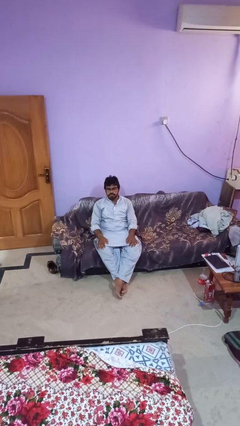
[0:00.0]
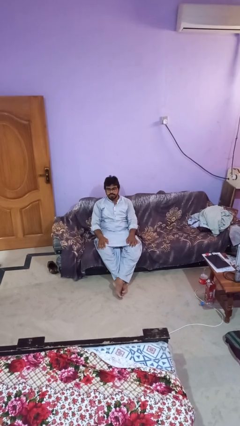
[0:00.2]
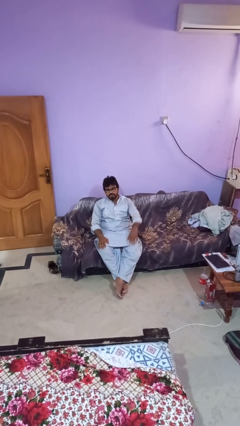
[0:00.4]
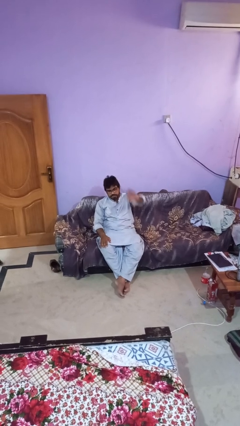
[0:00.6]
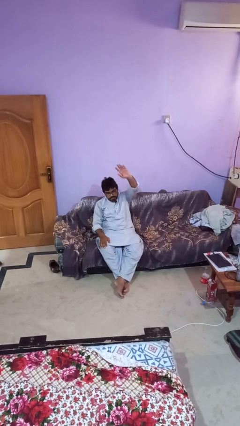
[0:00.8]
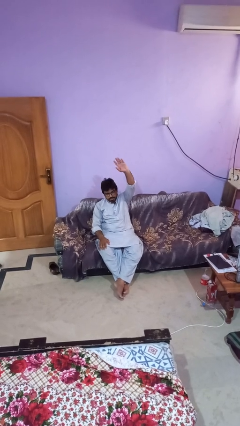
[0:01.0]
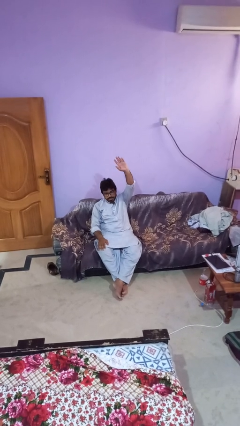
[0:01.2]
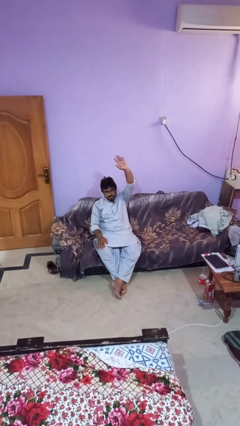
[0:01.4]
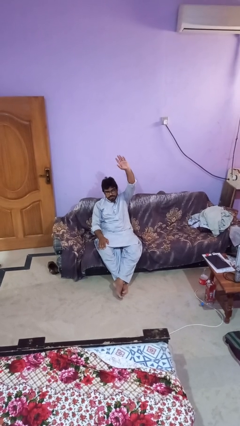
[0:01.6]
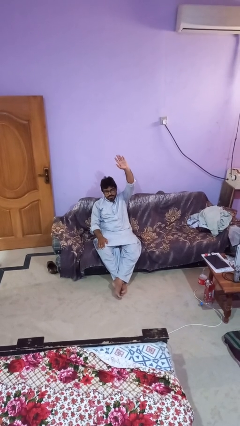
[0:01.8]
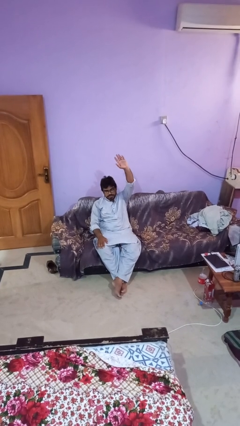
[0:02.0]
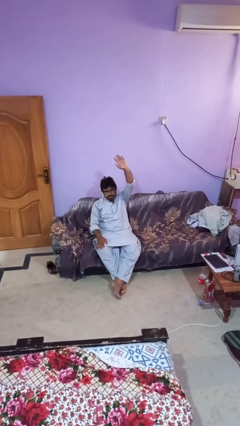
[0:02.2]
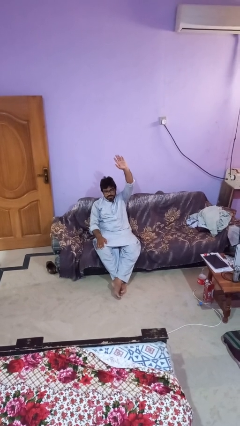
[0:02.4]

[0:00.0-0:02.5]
person gestures raise hand

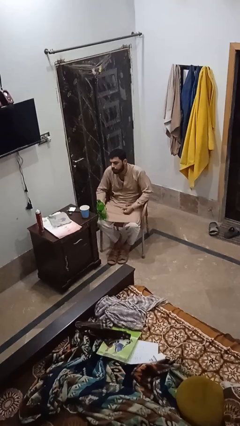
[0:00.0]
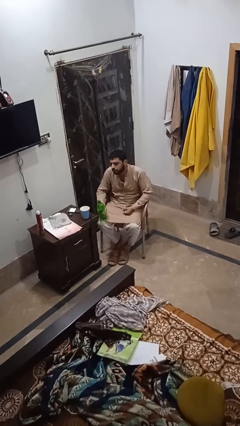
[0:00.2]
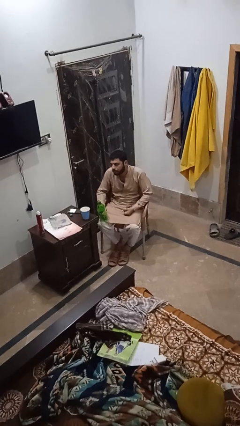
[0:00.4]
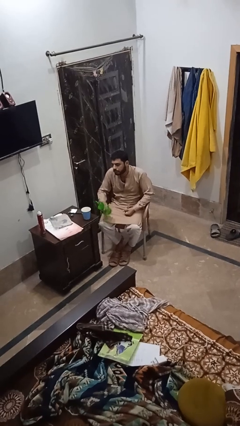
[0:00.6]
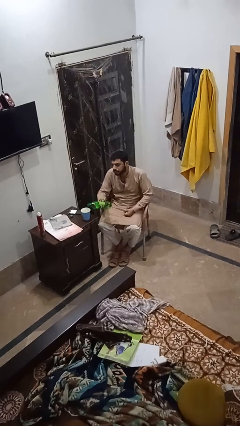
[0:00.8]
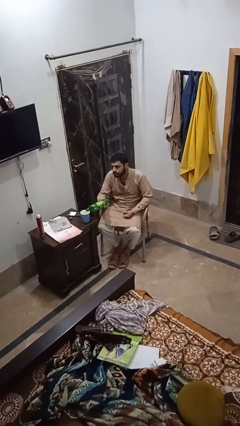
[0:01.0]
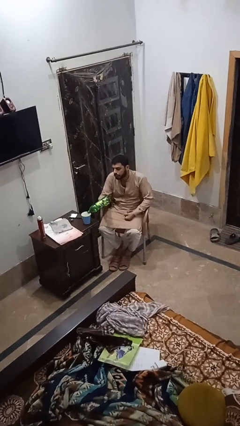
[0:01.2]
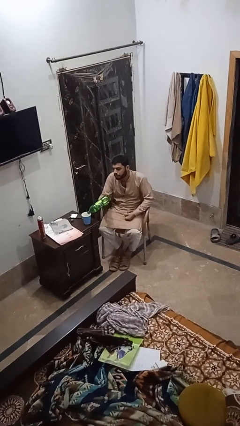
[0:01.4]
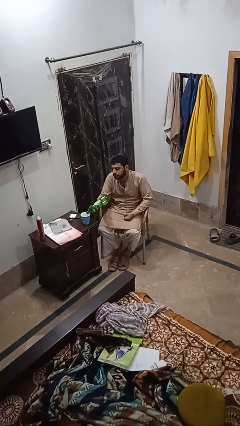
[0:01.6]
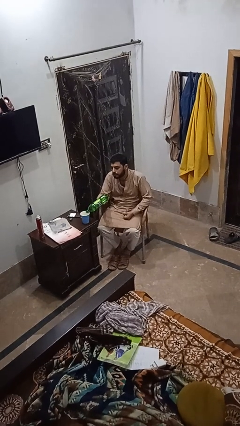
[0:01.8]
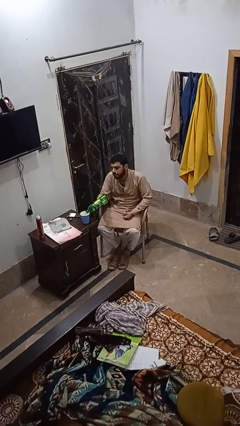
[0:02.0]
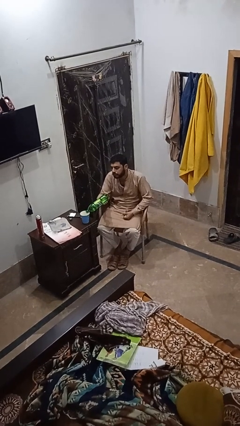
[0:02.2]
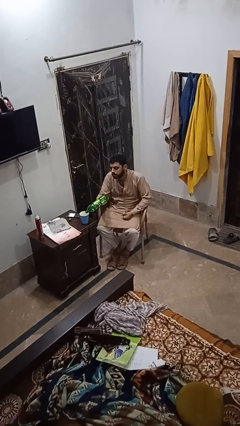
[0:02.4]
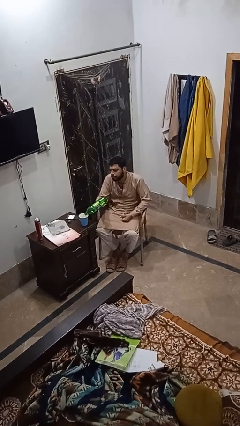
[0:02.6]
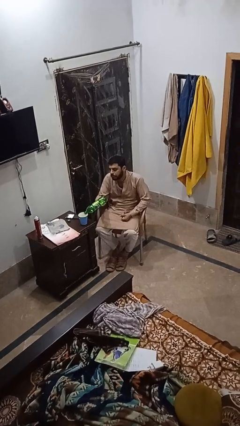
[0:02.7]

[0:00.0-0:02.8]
person pours liquid into cup

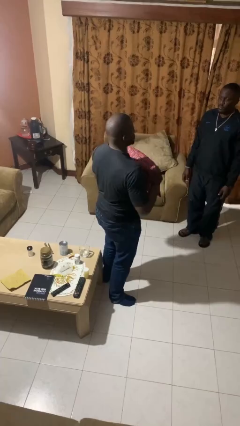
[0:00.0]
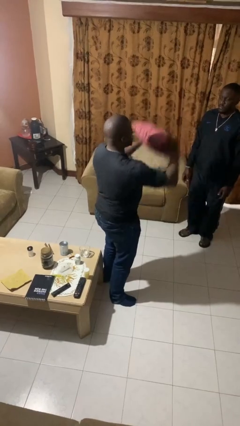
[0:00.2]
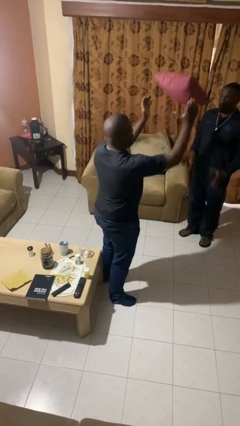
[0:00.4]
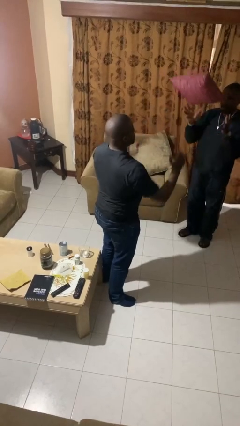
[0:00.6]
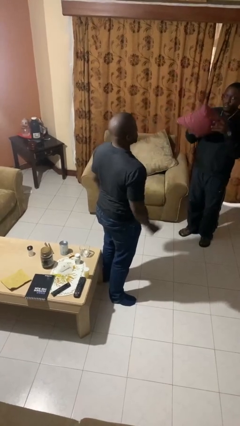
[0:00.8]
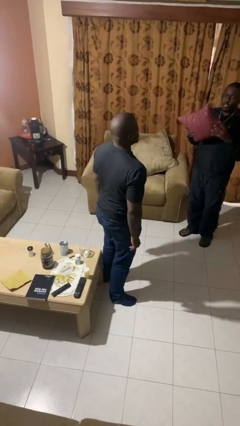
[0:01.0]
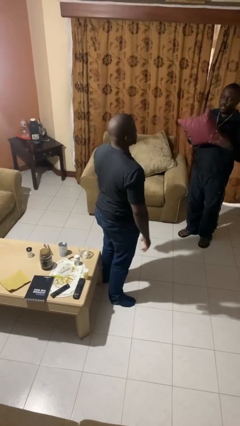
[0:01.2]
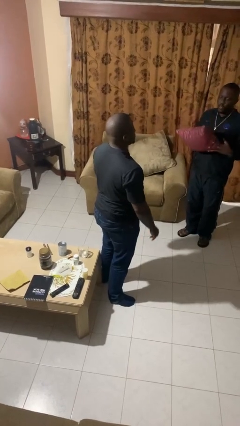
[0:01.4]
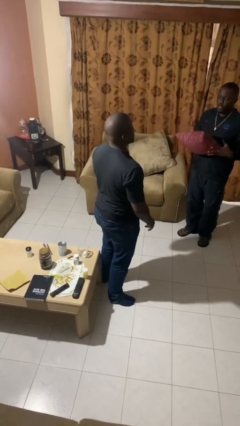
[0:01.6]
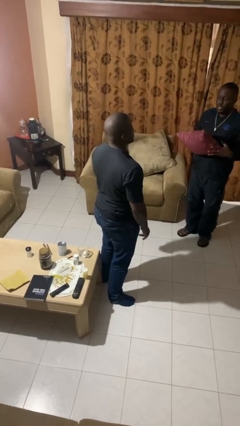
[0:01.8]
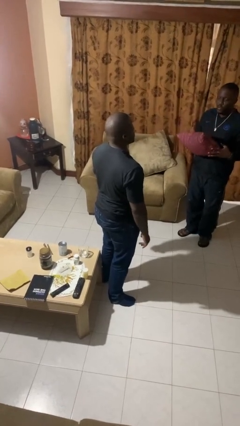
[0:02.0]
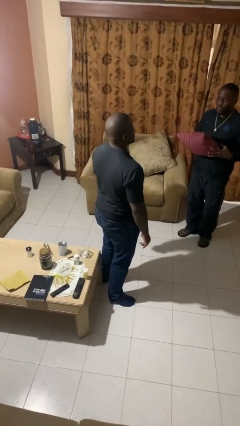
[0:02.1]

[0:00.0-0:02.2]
person throws object to person

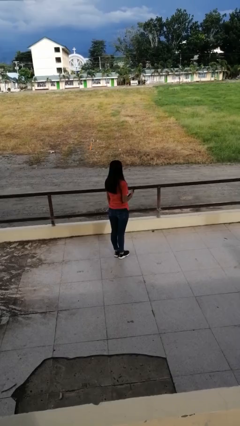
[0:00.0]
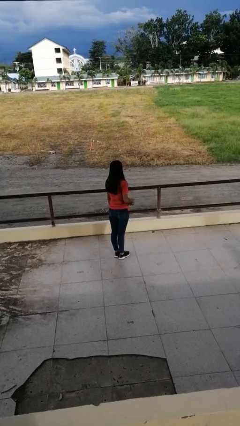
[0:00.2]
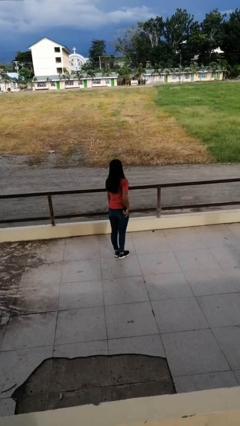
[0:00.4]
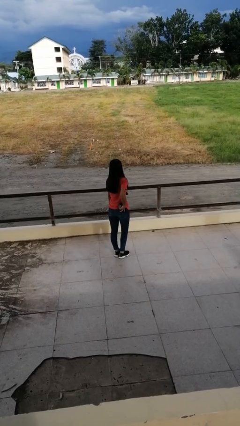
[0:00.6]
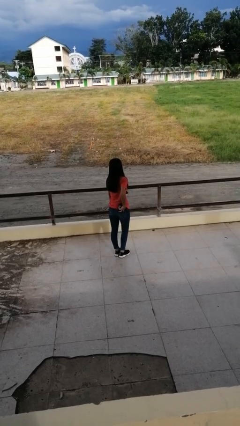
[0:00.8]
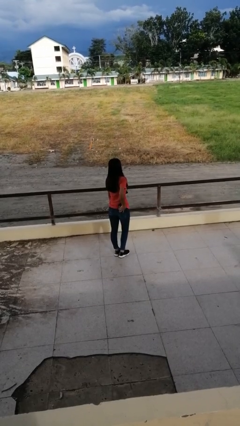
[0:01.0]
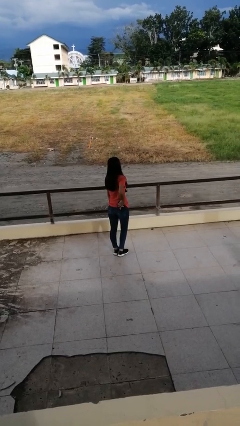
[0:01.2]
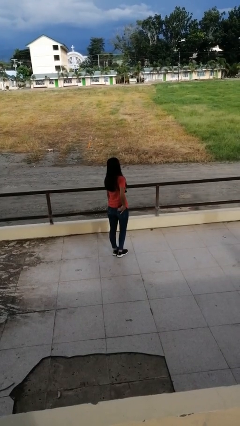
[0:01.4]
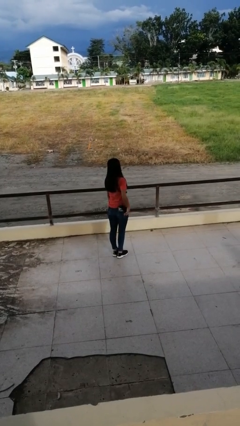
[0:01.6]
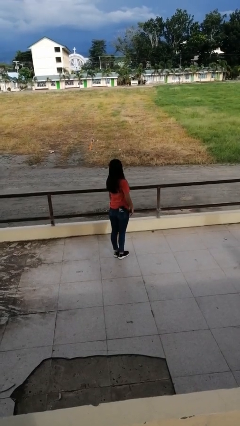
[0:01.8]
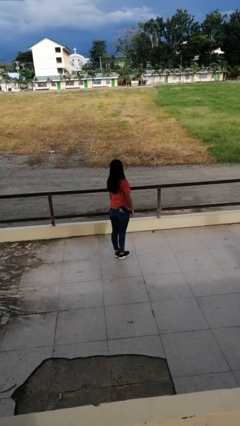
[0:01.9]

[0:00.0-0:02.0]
person puts phone into pocket

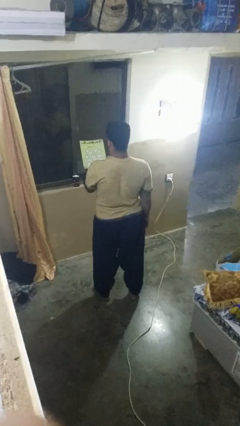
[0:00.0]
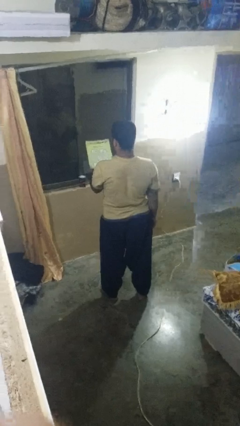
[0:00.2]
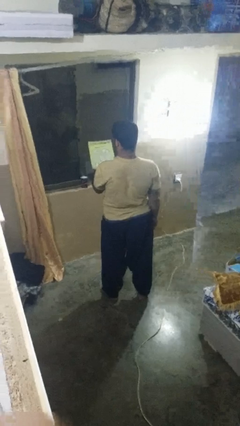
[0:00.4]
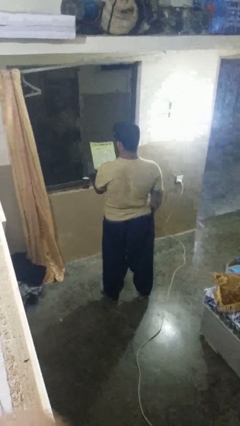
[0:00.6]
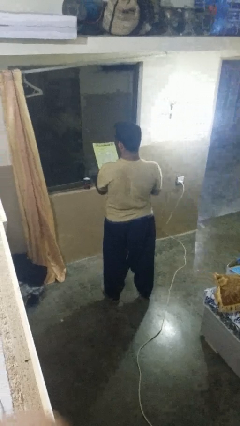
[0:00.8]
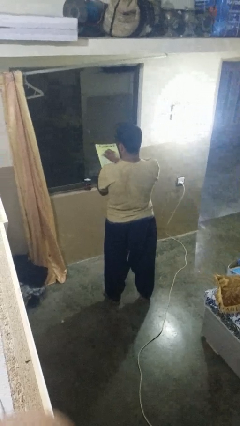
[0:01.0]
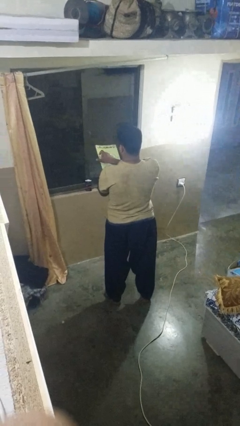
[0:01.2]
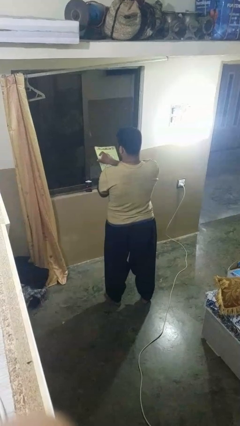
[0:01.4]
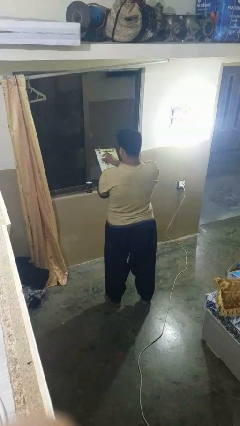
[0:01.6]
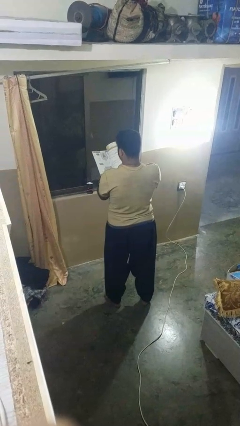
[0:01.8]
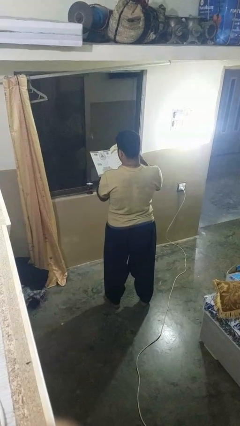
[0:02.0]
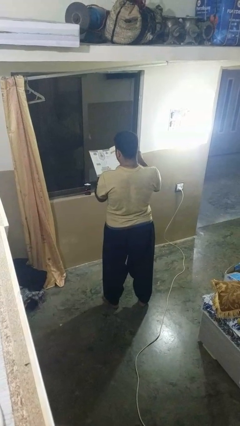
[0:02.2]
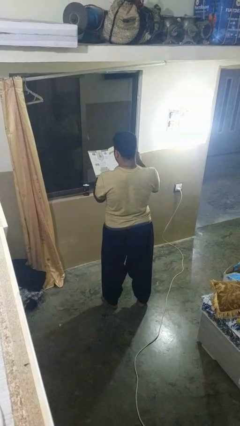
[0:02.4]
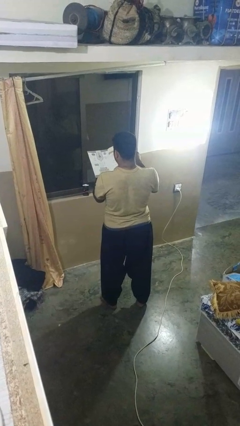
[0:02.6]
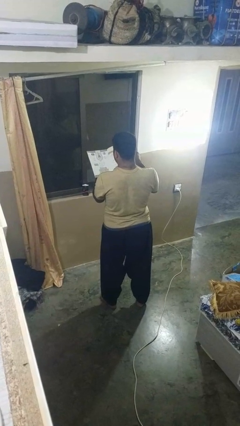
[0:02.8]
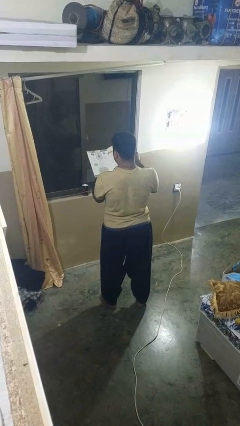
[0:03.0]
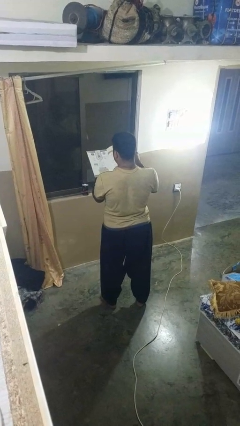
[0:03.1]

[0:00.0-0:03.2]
person reads magazine

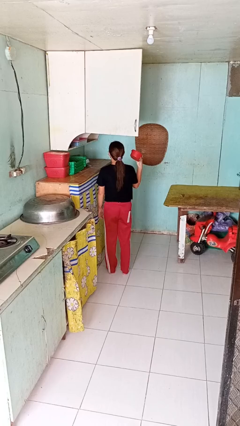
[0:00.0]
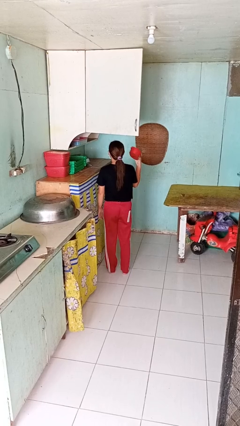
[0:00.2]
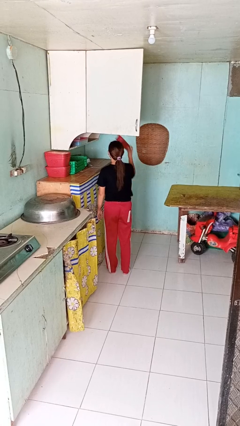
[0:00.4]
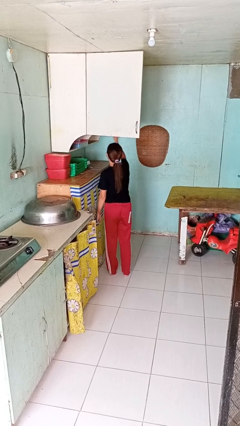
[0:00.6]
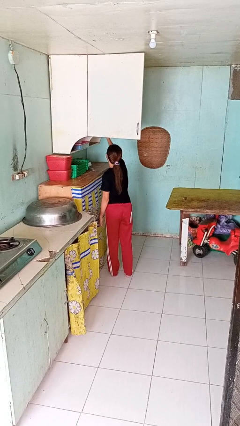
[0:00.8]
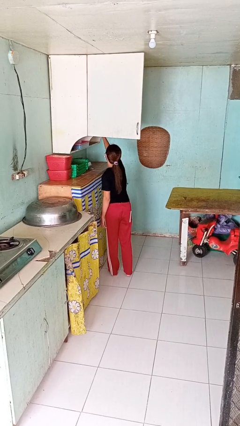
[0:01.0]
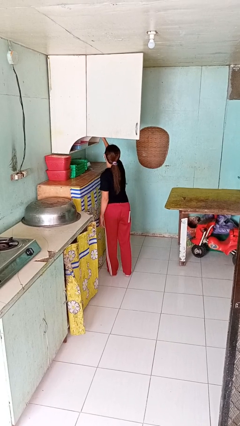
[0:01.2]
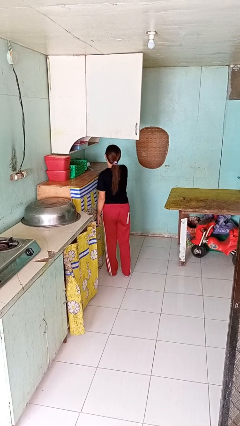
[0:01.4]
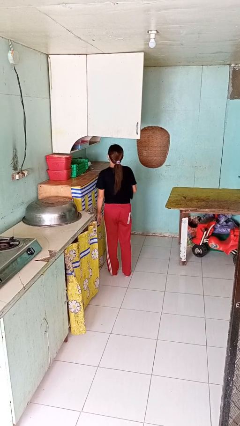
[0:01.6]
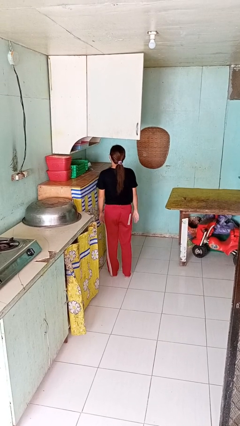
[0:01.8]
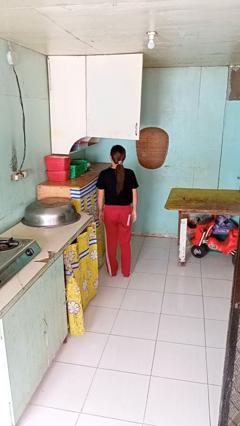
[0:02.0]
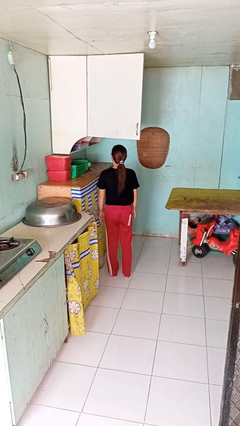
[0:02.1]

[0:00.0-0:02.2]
person puts object in cabinet

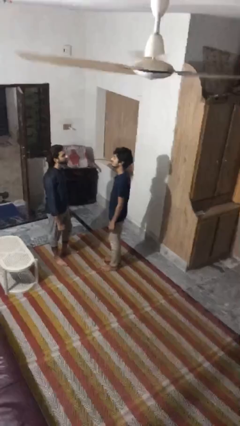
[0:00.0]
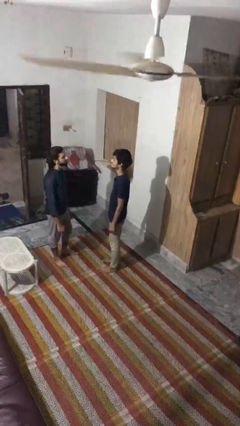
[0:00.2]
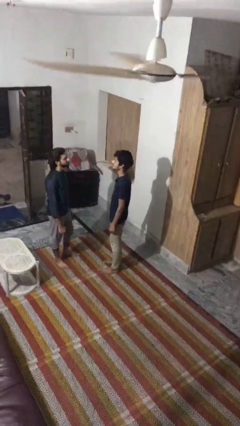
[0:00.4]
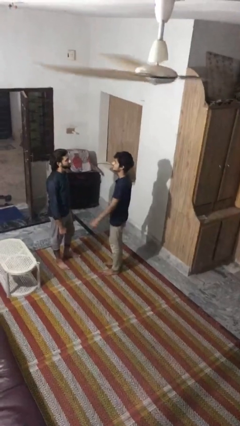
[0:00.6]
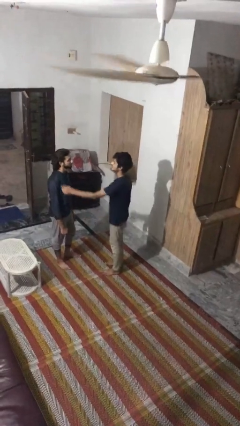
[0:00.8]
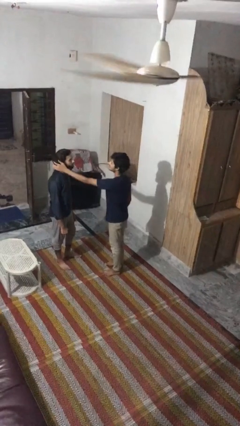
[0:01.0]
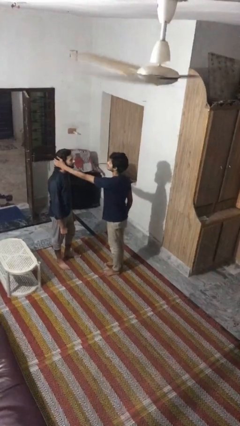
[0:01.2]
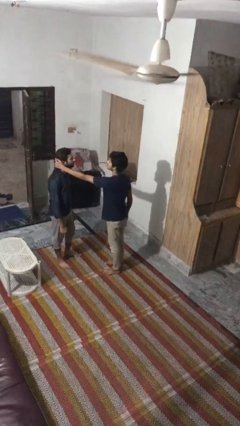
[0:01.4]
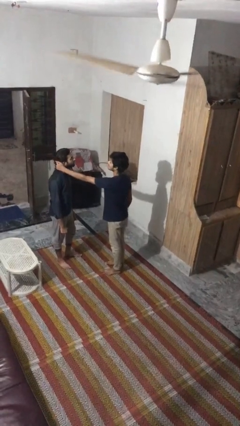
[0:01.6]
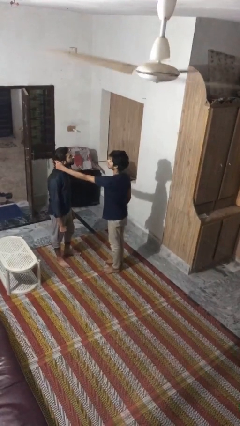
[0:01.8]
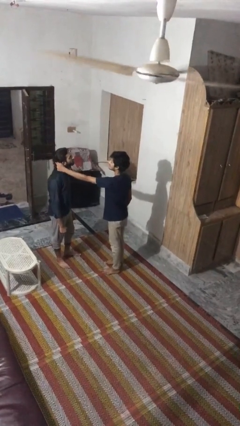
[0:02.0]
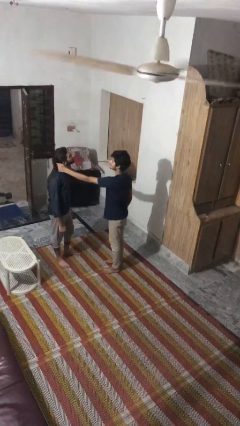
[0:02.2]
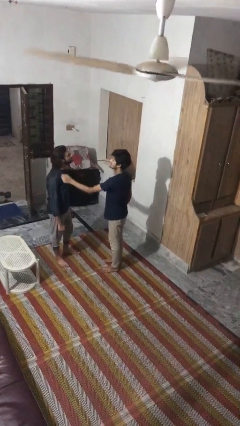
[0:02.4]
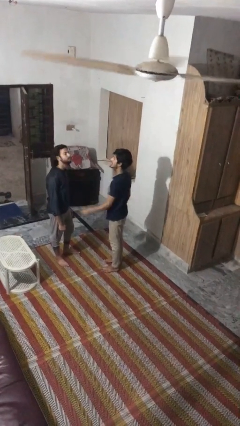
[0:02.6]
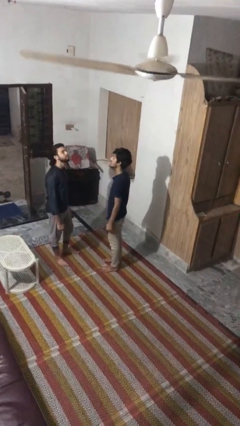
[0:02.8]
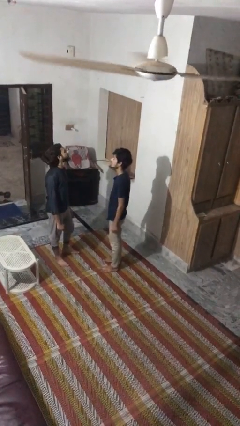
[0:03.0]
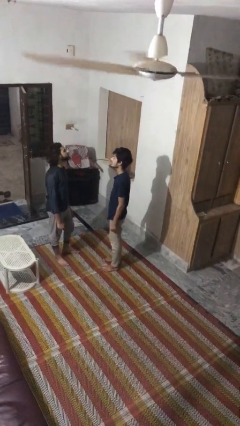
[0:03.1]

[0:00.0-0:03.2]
person grabs person by hair
